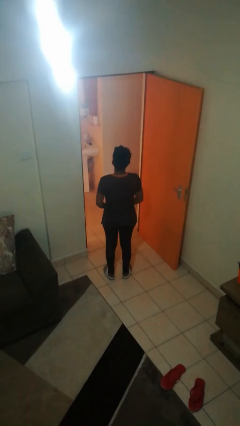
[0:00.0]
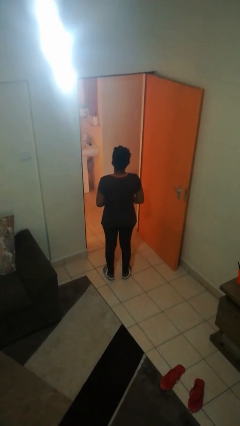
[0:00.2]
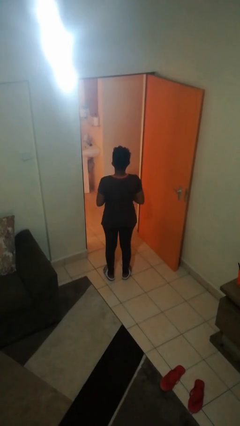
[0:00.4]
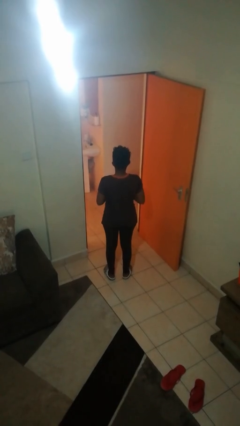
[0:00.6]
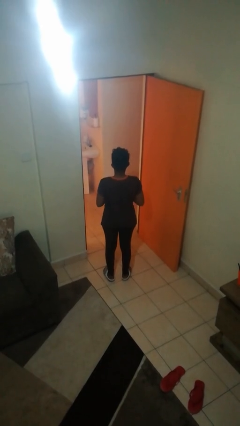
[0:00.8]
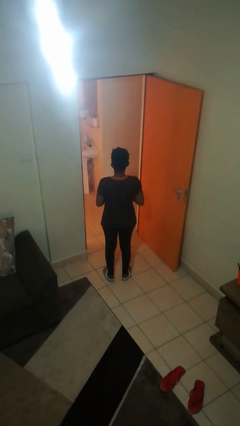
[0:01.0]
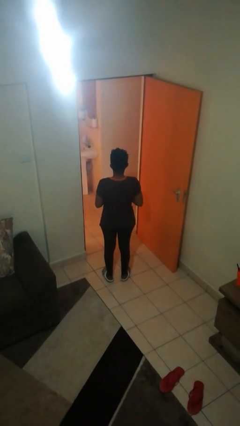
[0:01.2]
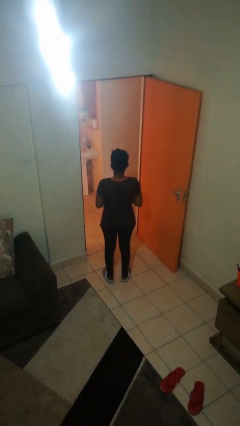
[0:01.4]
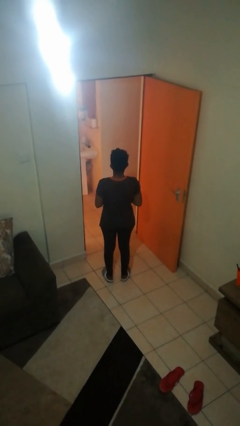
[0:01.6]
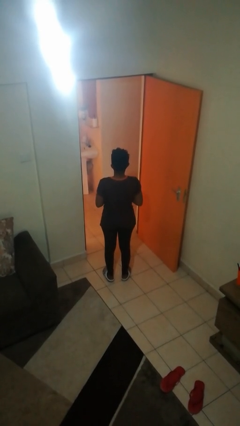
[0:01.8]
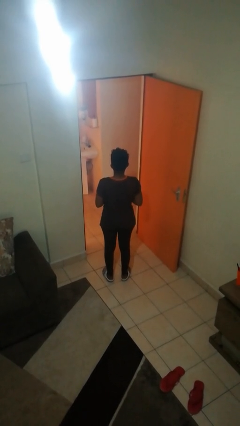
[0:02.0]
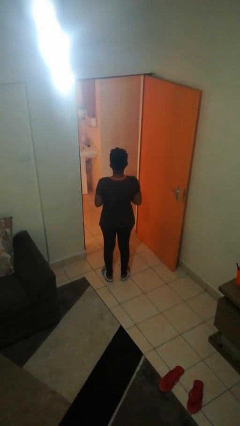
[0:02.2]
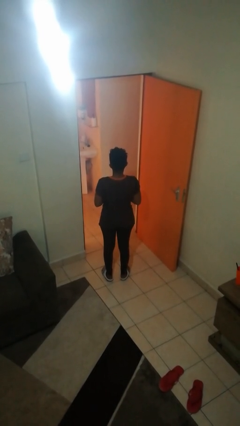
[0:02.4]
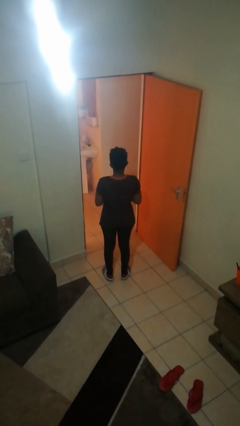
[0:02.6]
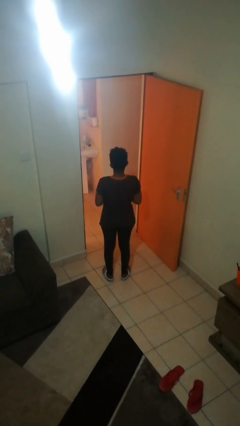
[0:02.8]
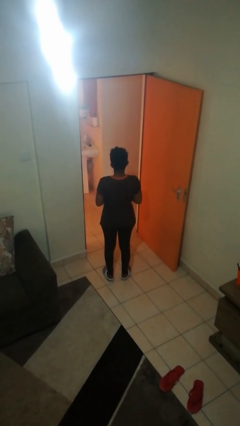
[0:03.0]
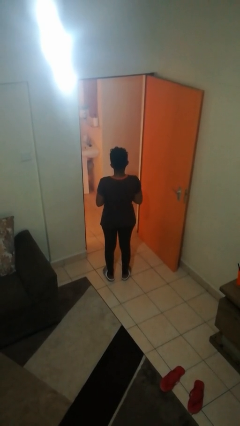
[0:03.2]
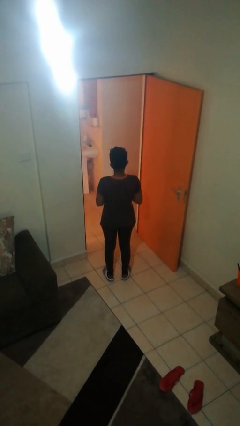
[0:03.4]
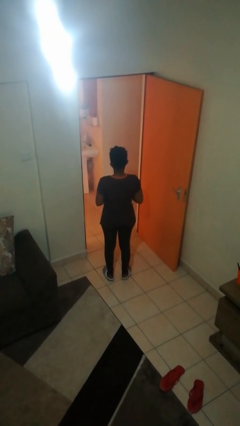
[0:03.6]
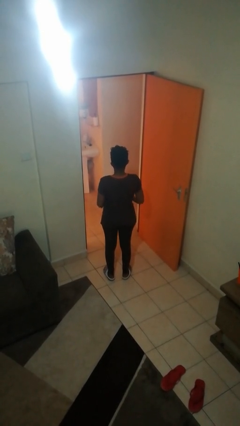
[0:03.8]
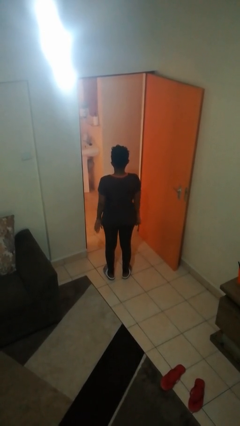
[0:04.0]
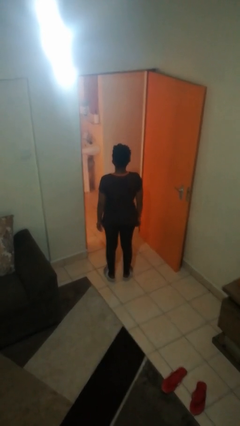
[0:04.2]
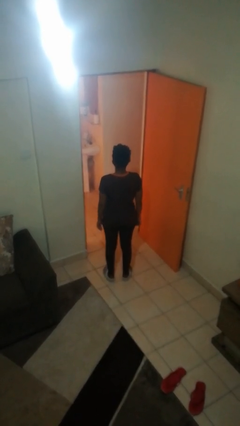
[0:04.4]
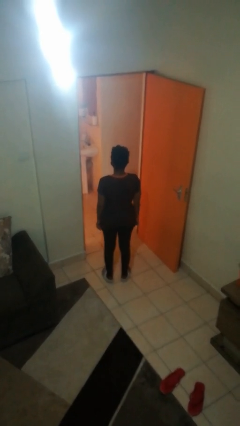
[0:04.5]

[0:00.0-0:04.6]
person puts on ring

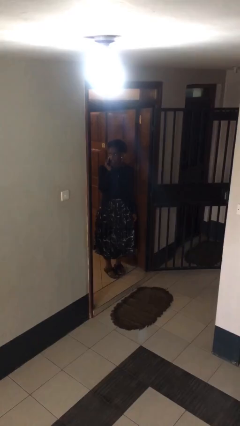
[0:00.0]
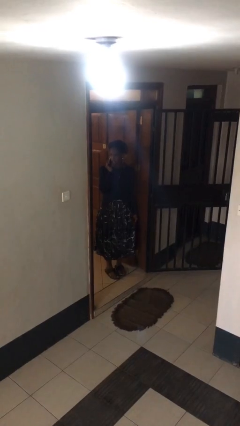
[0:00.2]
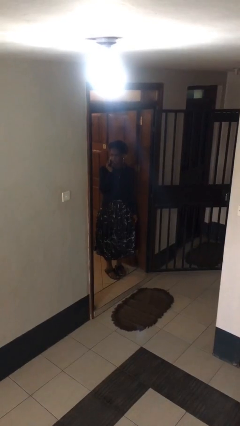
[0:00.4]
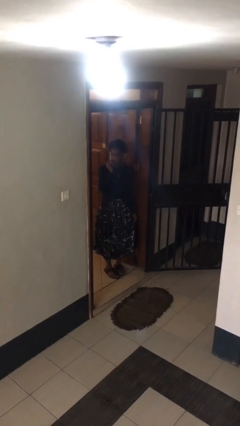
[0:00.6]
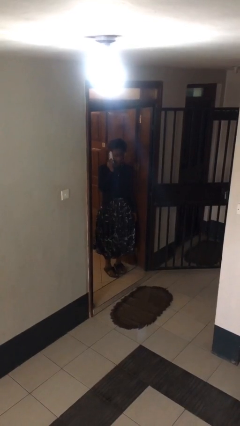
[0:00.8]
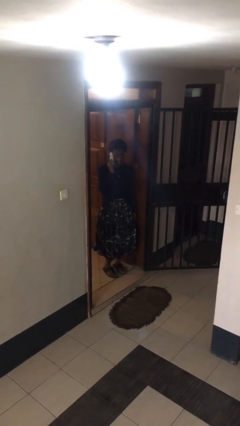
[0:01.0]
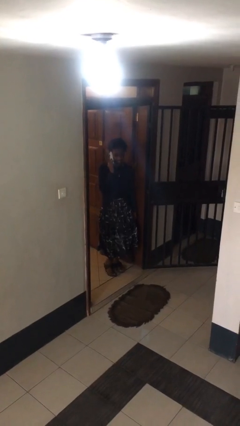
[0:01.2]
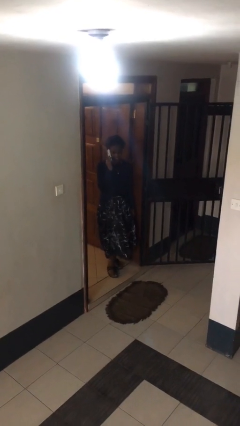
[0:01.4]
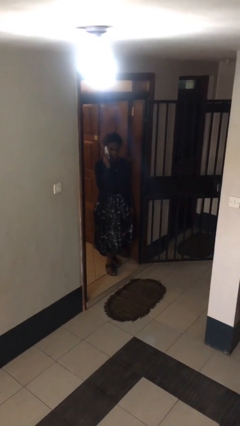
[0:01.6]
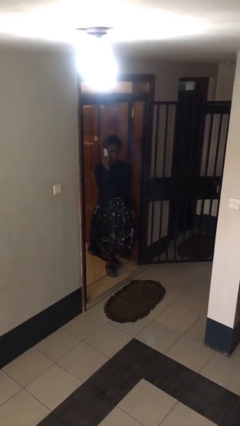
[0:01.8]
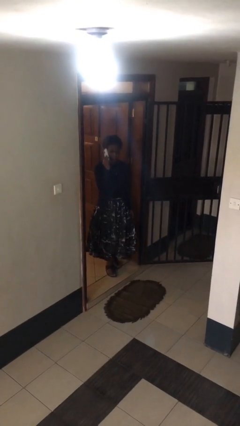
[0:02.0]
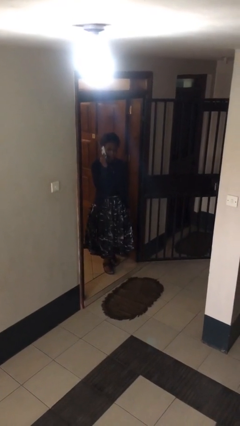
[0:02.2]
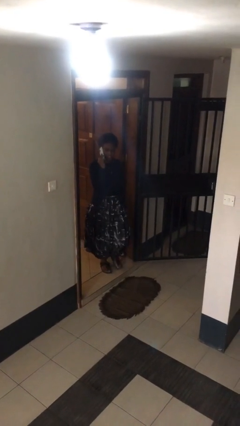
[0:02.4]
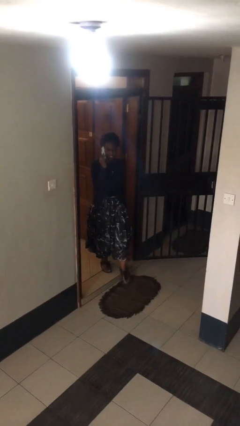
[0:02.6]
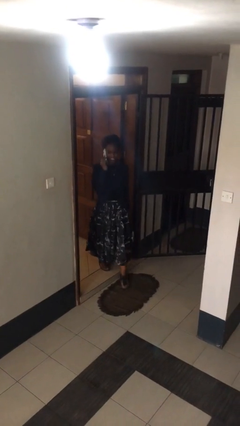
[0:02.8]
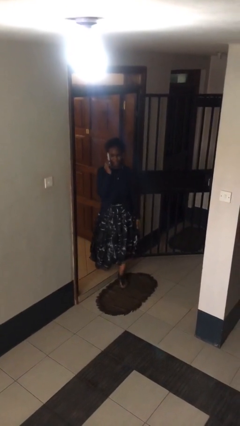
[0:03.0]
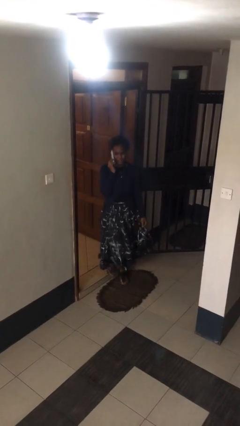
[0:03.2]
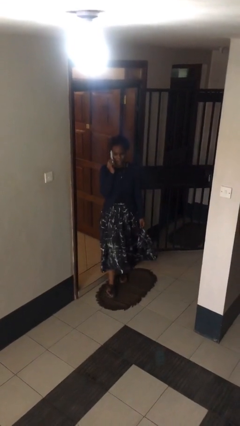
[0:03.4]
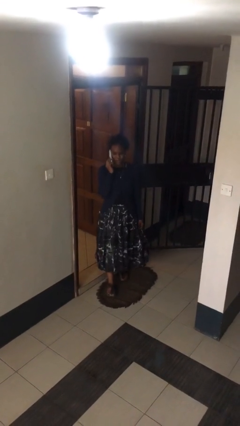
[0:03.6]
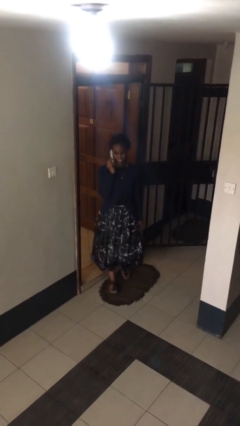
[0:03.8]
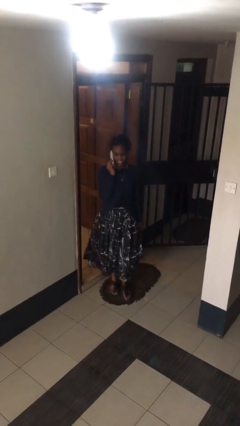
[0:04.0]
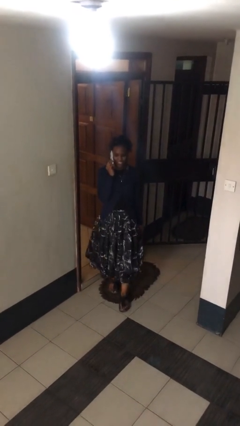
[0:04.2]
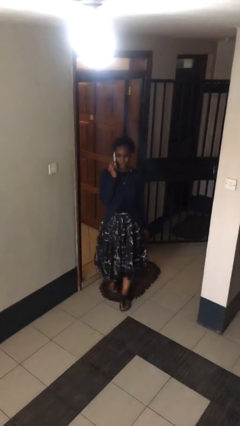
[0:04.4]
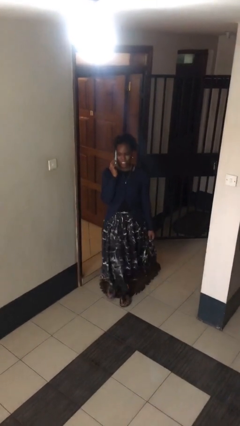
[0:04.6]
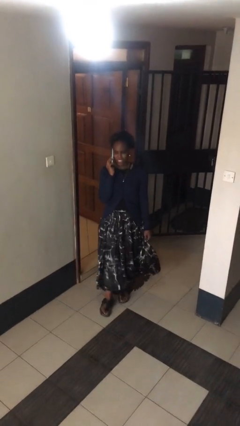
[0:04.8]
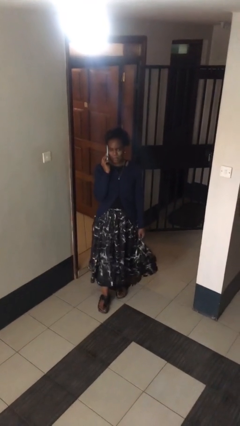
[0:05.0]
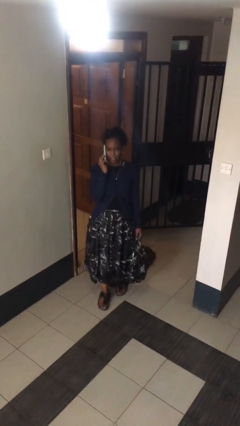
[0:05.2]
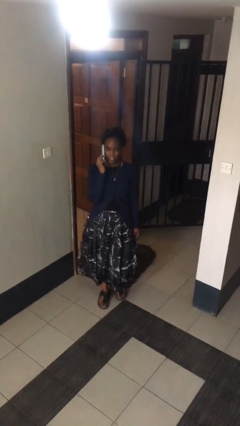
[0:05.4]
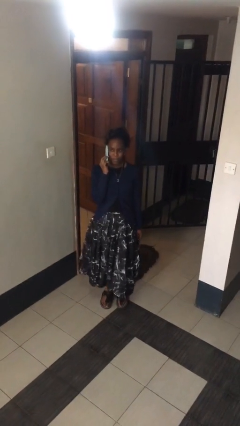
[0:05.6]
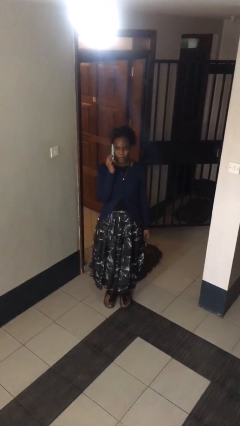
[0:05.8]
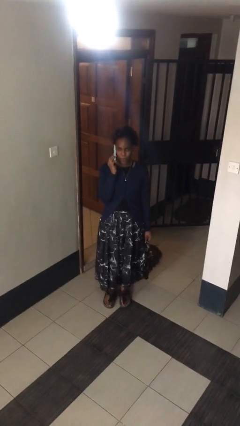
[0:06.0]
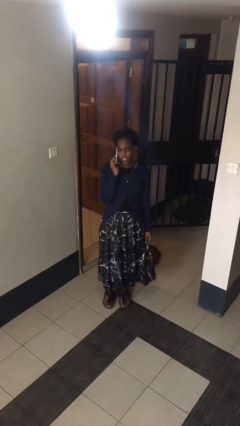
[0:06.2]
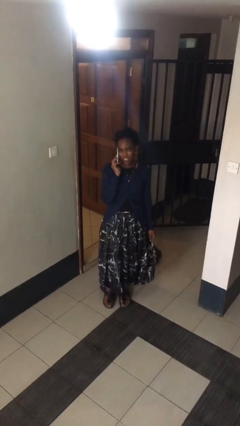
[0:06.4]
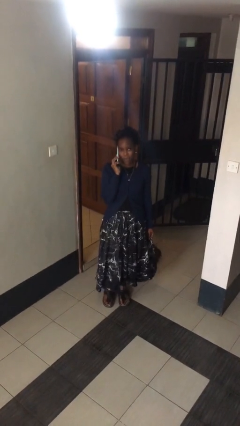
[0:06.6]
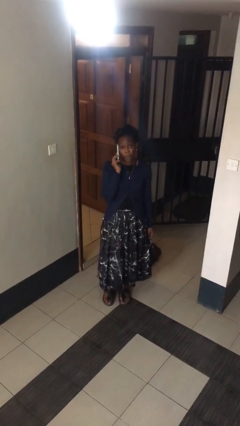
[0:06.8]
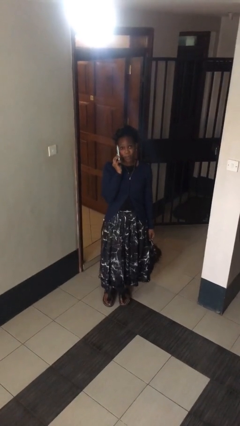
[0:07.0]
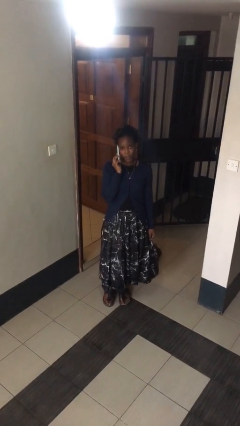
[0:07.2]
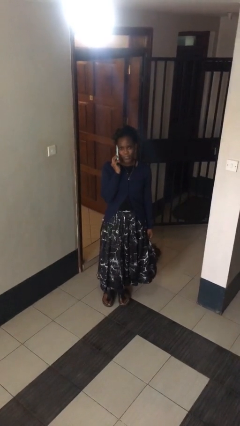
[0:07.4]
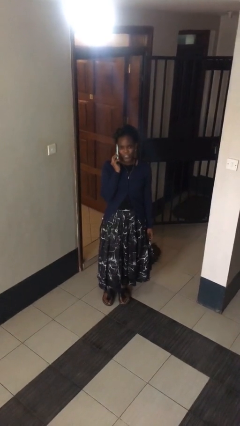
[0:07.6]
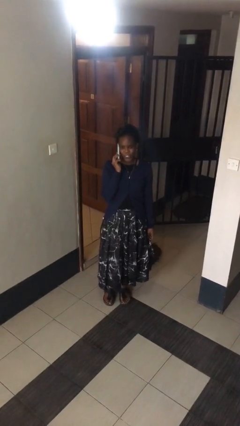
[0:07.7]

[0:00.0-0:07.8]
person enters scene through structure

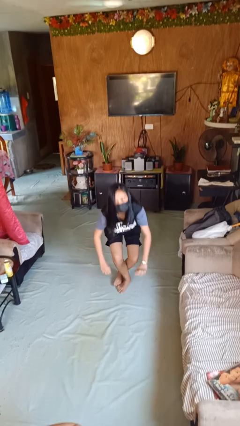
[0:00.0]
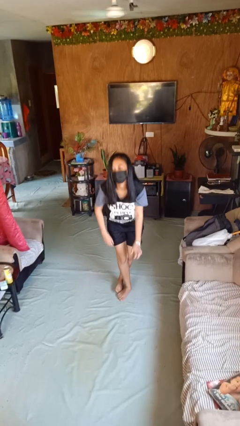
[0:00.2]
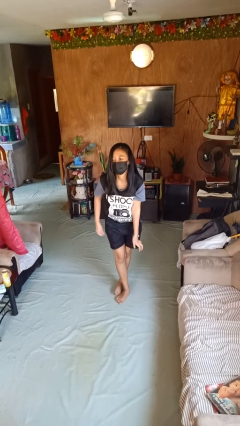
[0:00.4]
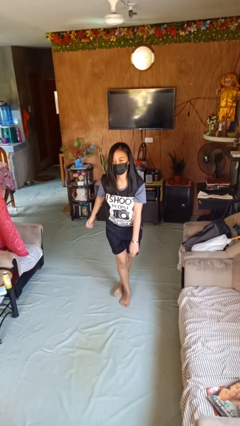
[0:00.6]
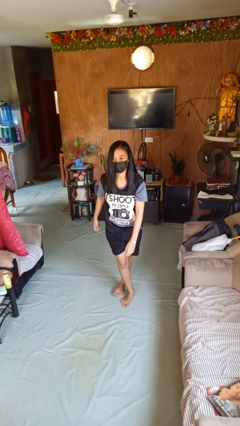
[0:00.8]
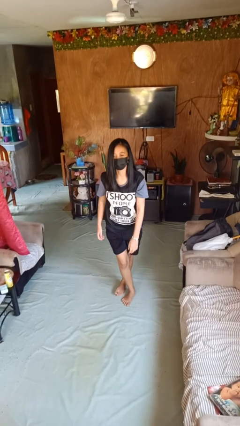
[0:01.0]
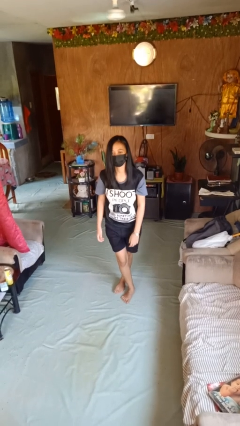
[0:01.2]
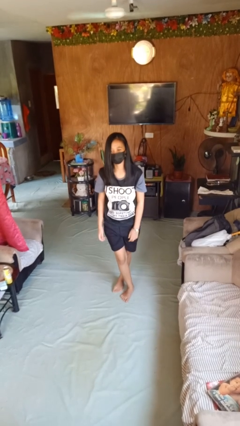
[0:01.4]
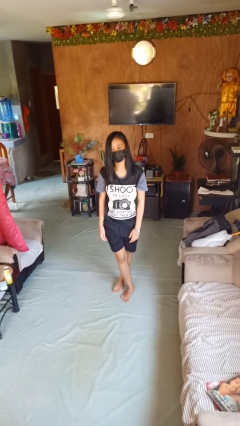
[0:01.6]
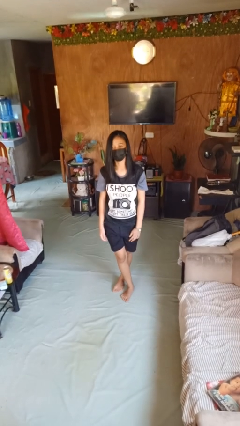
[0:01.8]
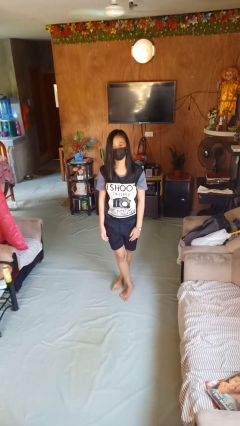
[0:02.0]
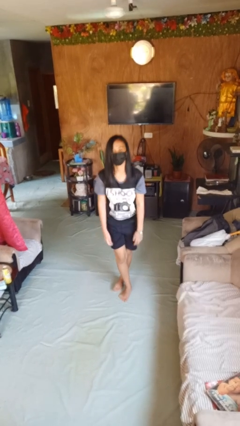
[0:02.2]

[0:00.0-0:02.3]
person stands up from floor

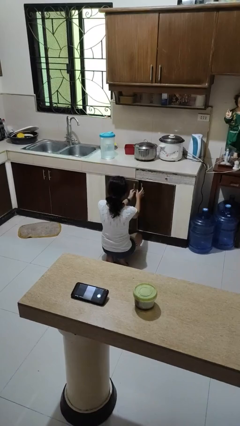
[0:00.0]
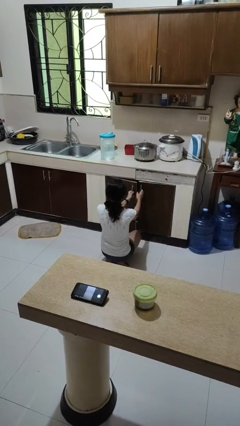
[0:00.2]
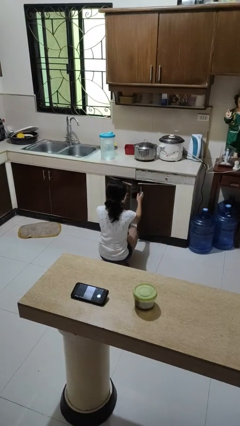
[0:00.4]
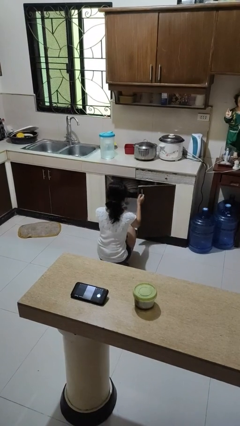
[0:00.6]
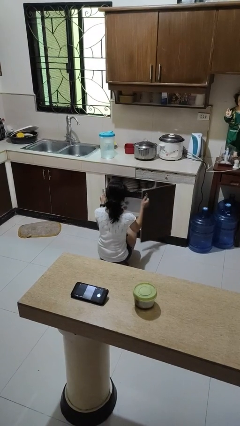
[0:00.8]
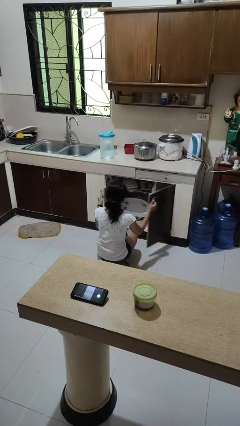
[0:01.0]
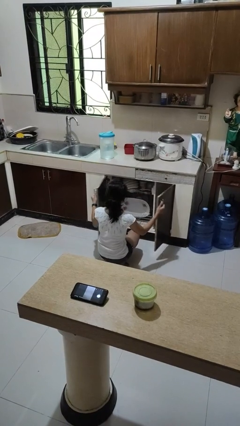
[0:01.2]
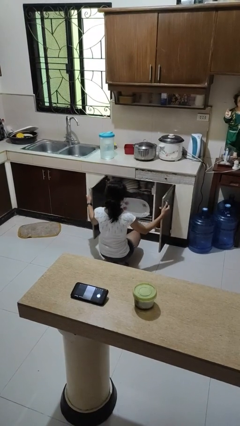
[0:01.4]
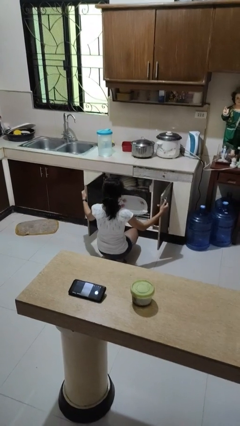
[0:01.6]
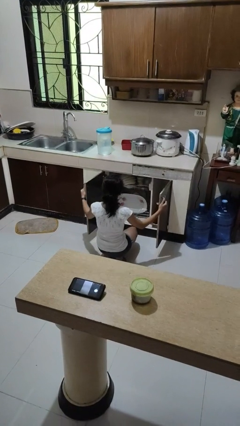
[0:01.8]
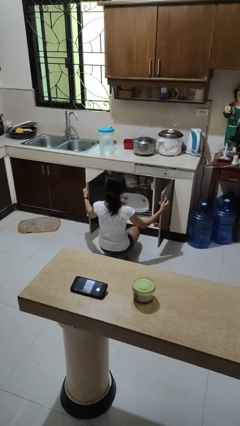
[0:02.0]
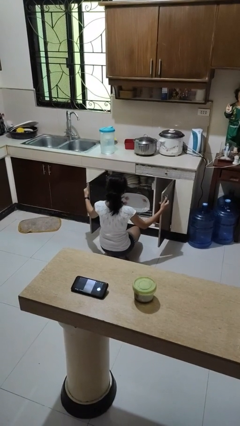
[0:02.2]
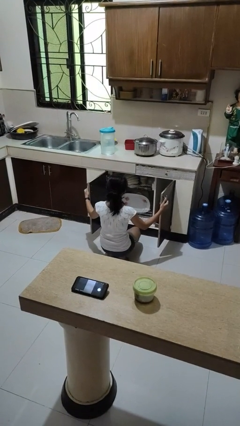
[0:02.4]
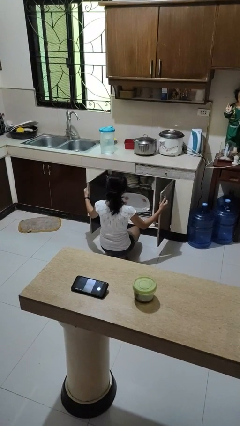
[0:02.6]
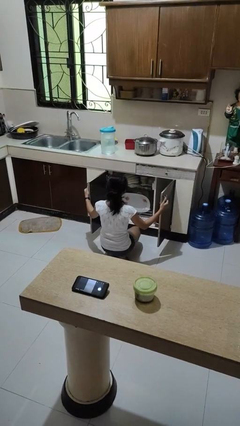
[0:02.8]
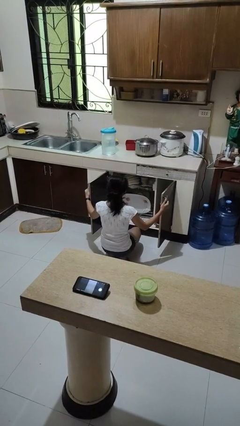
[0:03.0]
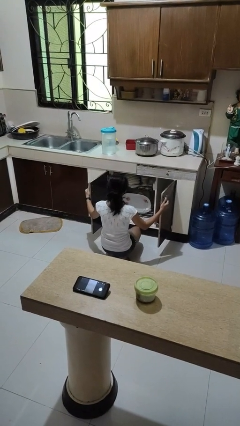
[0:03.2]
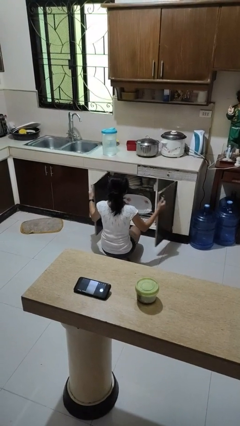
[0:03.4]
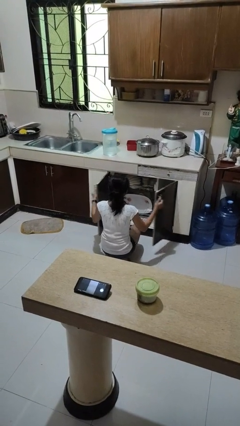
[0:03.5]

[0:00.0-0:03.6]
person opens dishwasher
